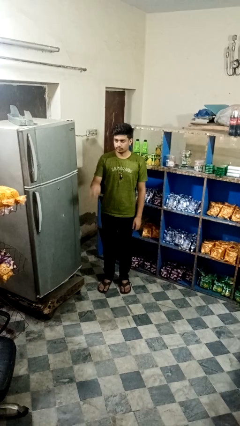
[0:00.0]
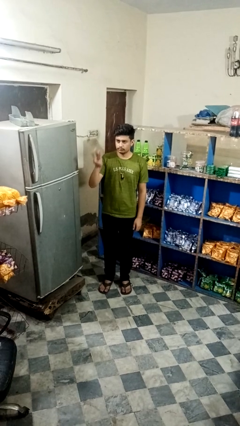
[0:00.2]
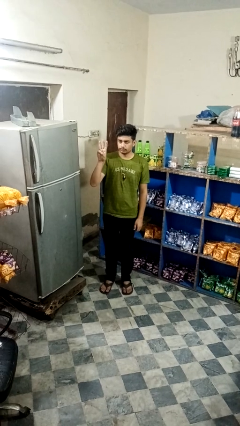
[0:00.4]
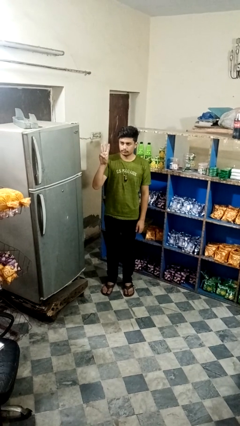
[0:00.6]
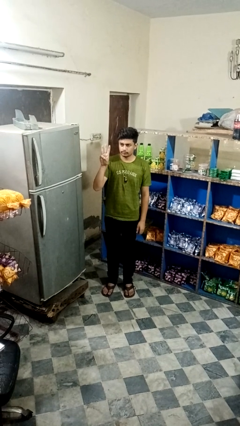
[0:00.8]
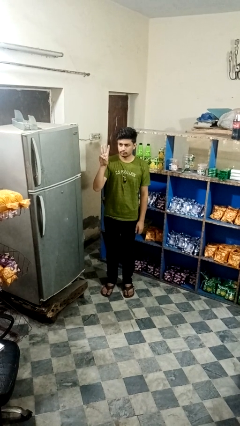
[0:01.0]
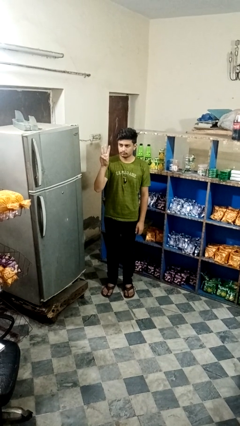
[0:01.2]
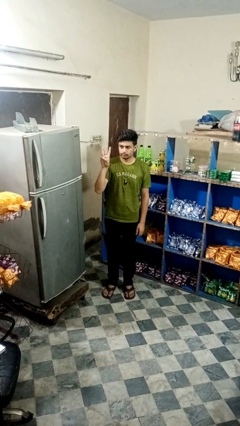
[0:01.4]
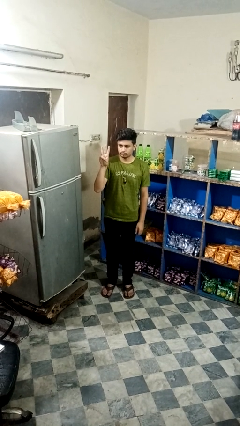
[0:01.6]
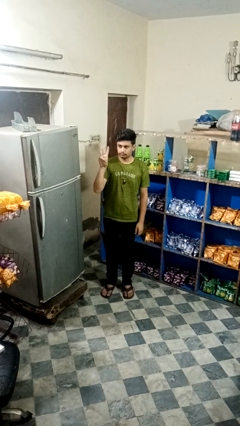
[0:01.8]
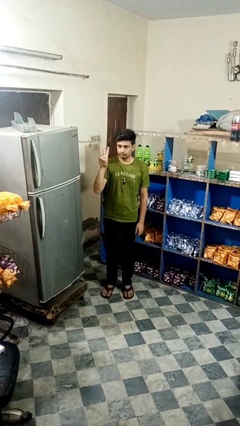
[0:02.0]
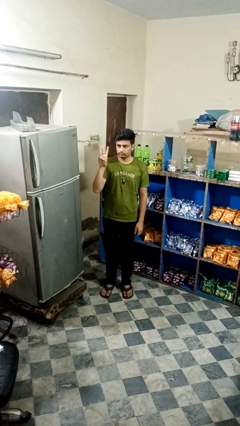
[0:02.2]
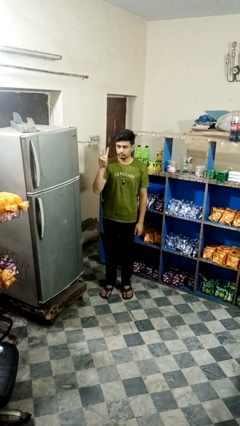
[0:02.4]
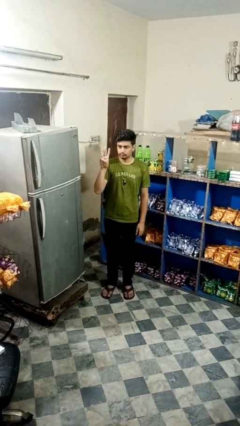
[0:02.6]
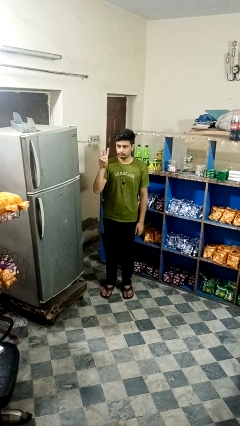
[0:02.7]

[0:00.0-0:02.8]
person gestures number three

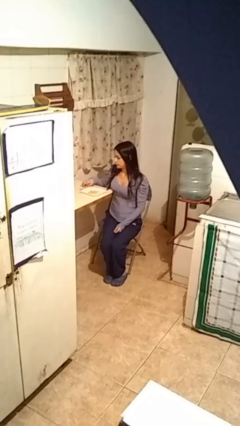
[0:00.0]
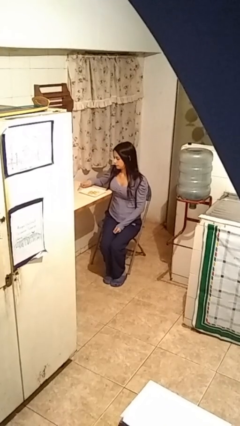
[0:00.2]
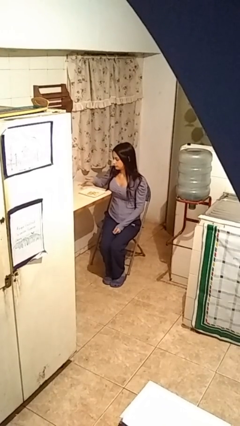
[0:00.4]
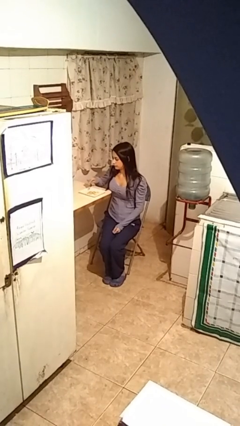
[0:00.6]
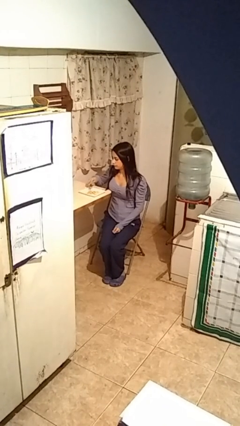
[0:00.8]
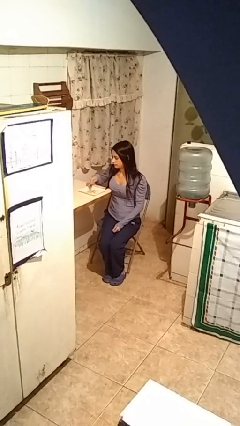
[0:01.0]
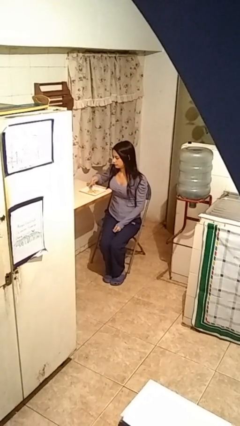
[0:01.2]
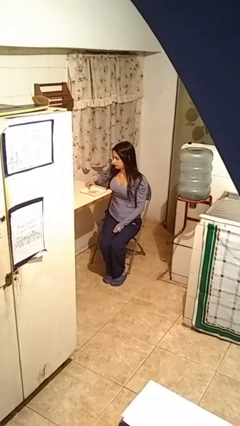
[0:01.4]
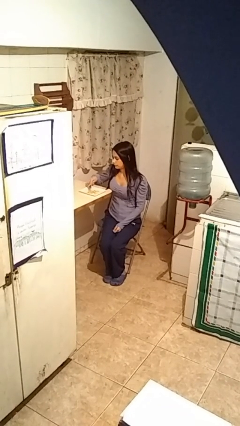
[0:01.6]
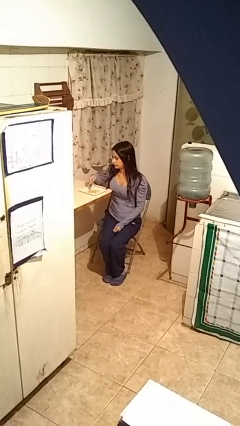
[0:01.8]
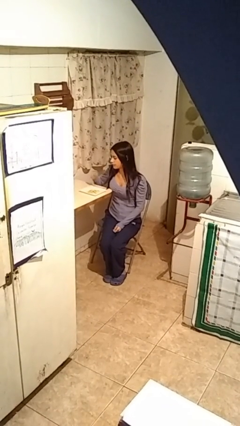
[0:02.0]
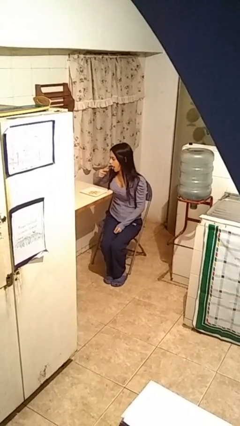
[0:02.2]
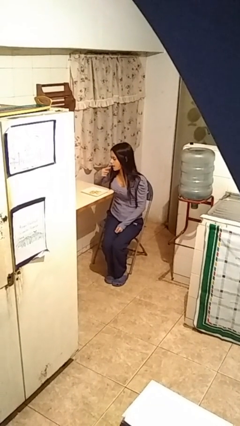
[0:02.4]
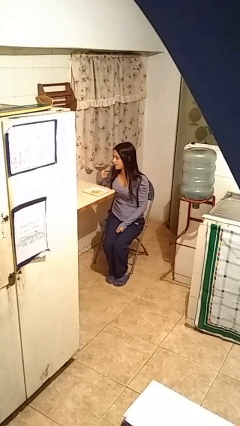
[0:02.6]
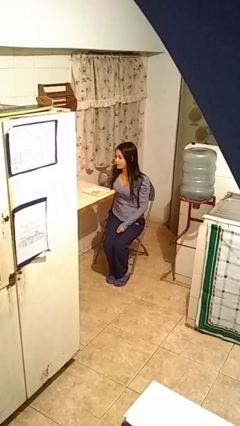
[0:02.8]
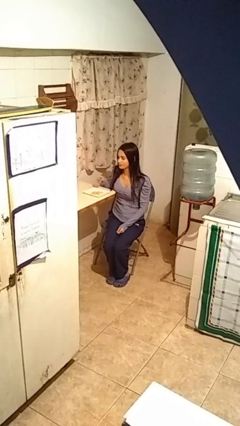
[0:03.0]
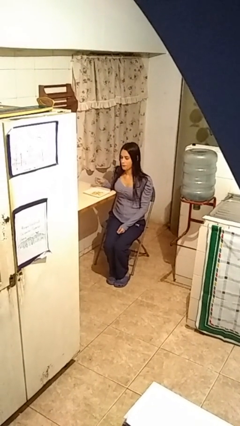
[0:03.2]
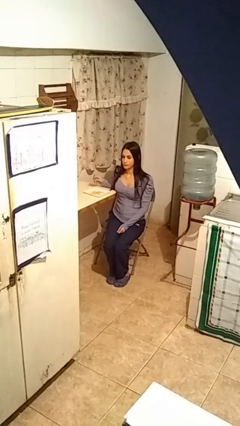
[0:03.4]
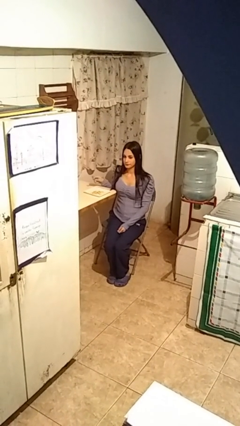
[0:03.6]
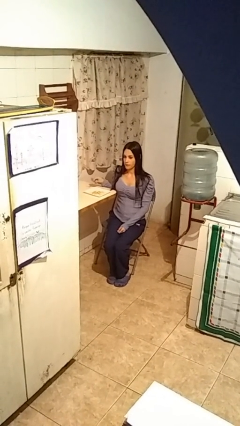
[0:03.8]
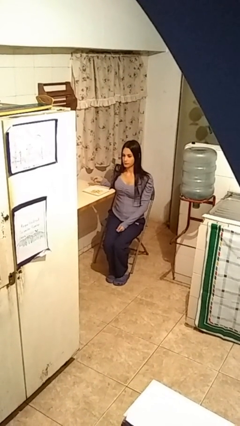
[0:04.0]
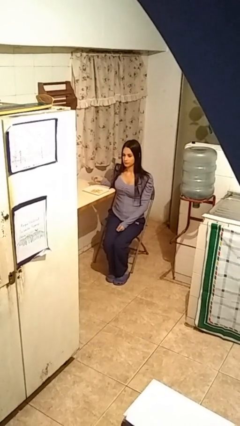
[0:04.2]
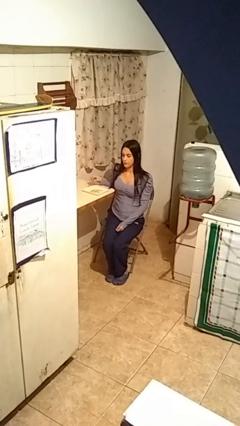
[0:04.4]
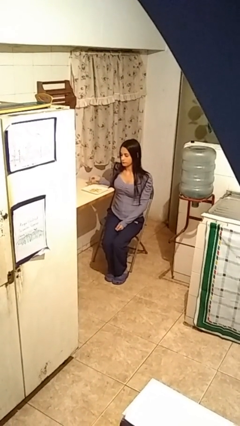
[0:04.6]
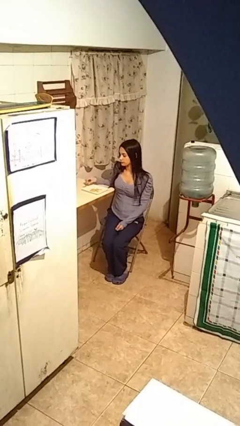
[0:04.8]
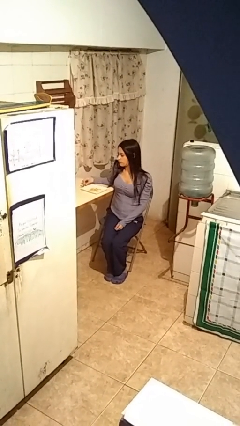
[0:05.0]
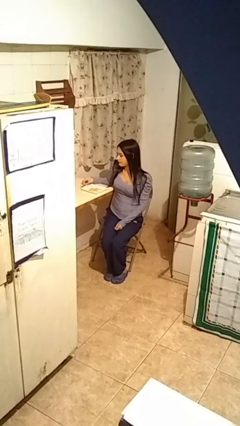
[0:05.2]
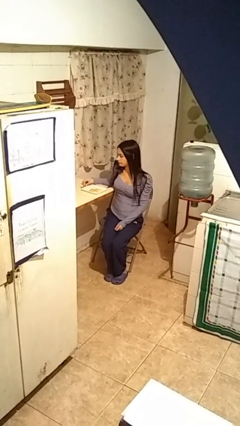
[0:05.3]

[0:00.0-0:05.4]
person eats with utensil

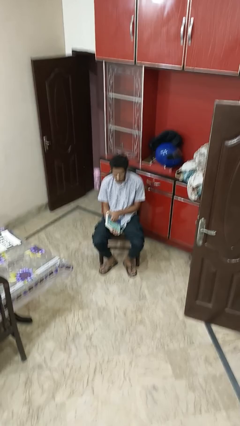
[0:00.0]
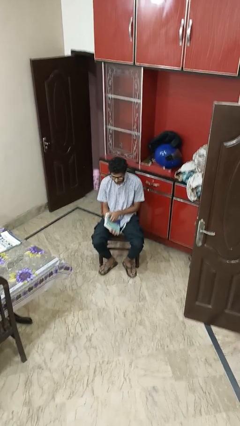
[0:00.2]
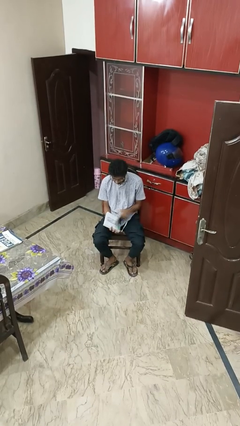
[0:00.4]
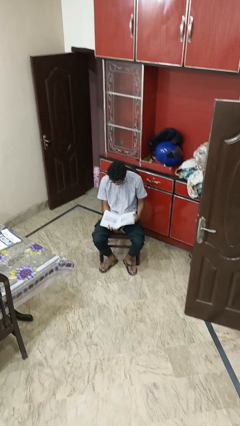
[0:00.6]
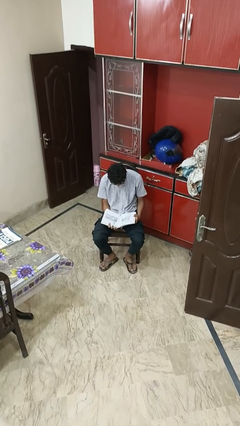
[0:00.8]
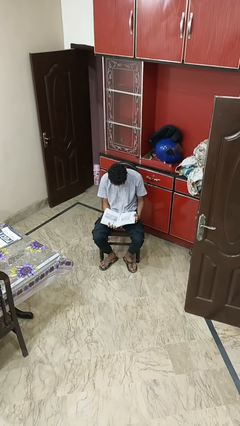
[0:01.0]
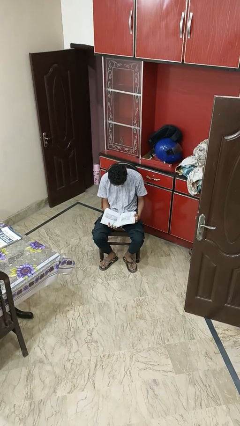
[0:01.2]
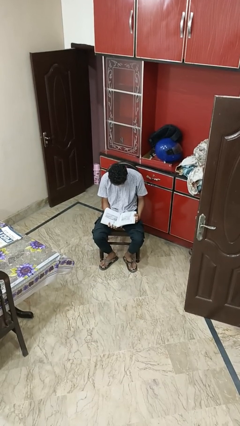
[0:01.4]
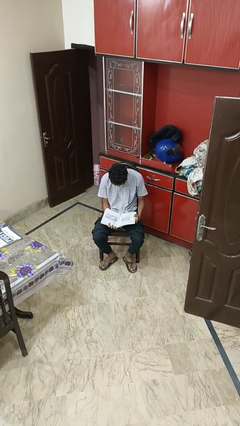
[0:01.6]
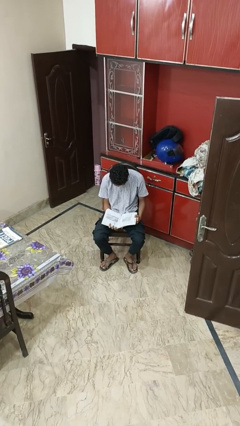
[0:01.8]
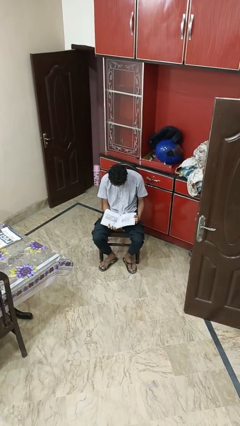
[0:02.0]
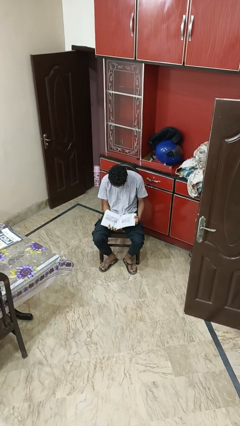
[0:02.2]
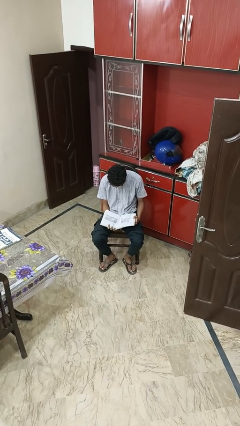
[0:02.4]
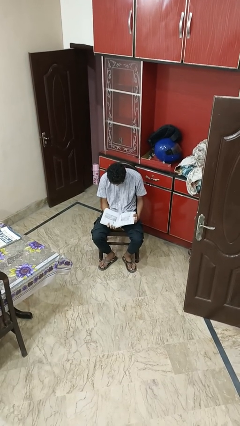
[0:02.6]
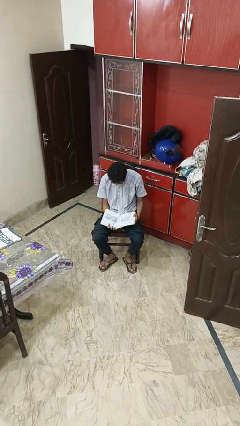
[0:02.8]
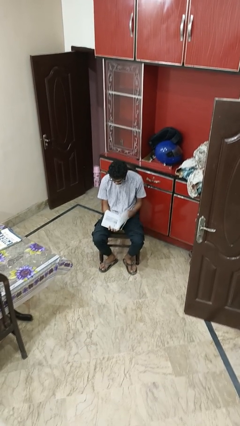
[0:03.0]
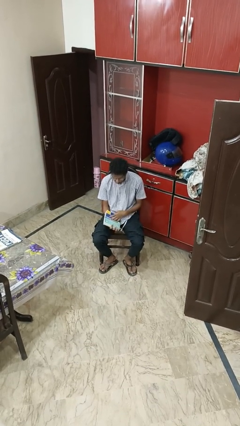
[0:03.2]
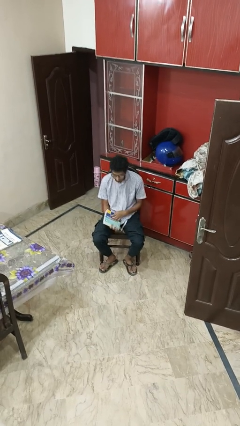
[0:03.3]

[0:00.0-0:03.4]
person reads book

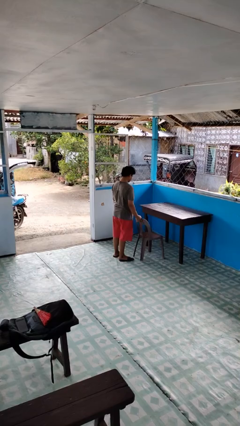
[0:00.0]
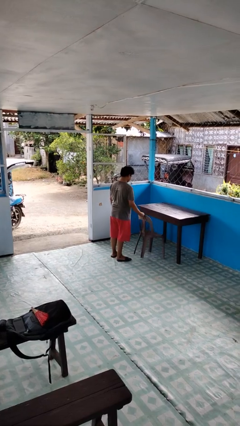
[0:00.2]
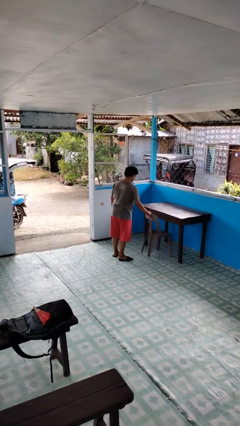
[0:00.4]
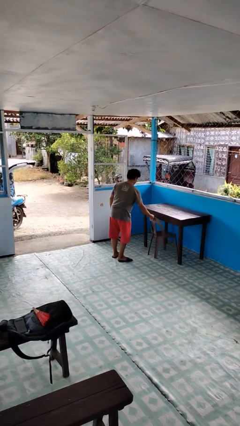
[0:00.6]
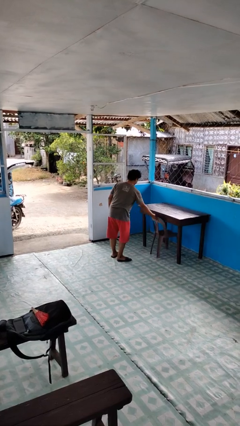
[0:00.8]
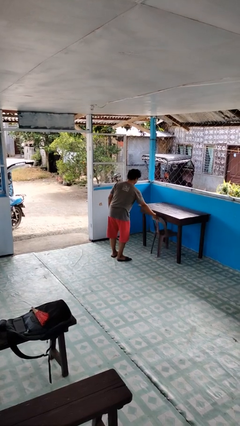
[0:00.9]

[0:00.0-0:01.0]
person pushes in chair

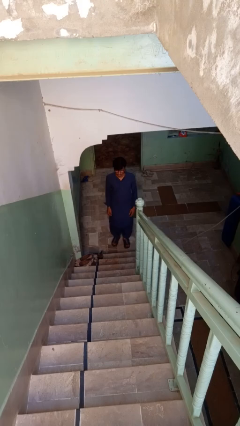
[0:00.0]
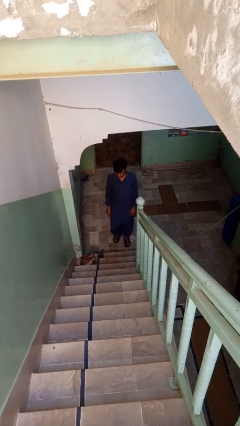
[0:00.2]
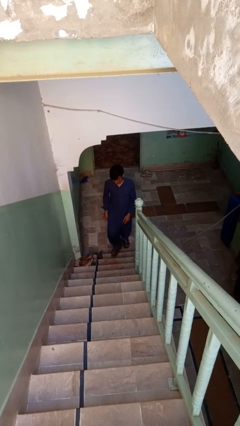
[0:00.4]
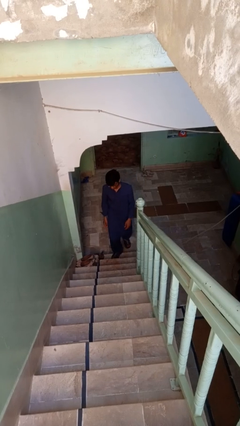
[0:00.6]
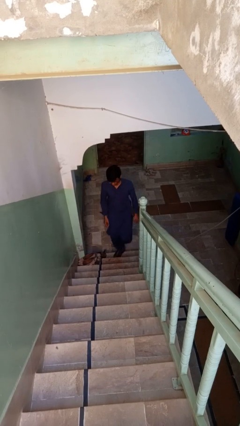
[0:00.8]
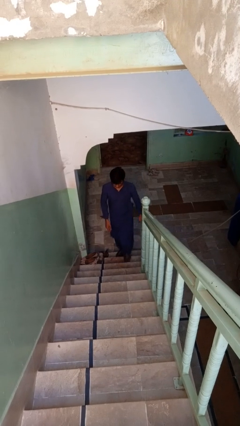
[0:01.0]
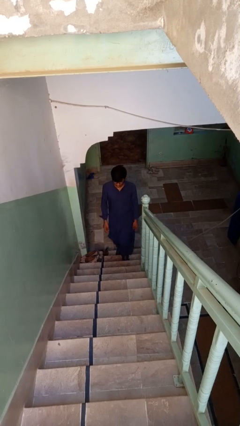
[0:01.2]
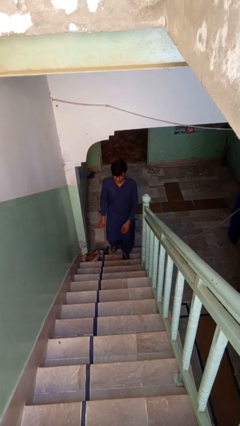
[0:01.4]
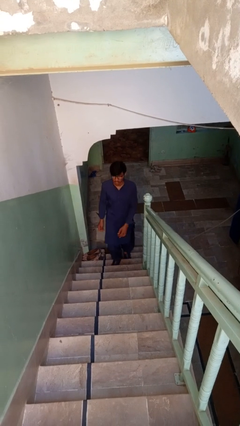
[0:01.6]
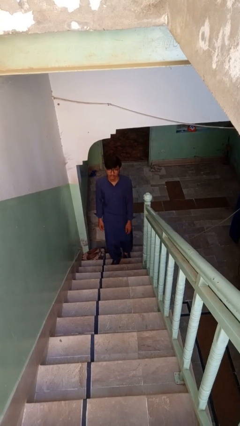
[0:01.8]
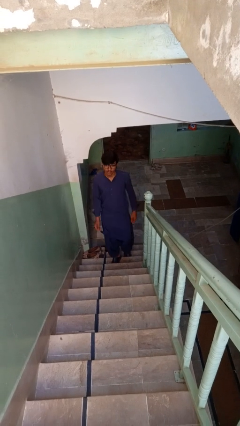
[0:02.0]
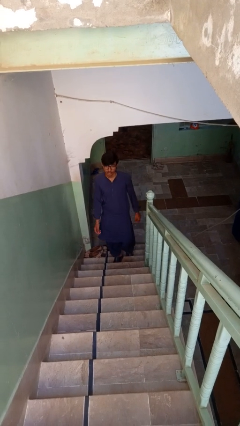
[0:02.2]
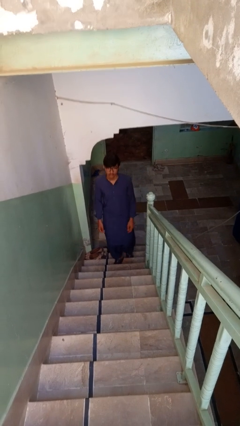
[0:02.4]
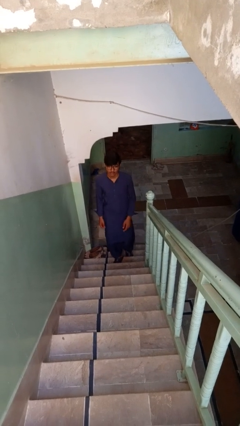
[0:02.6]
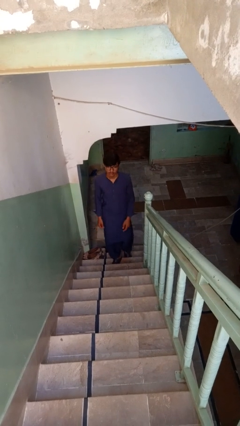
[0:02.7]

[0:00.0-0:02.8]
person climbs up stairs

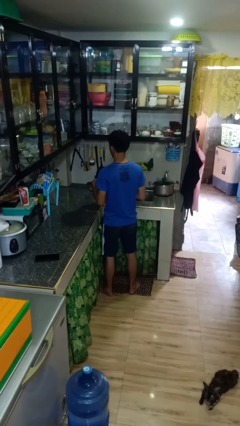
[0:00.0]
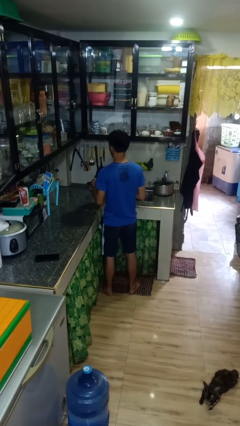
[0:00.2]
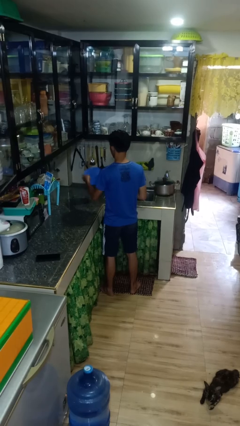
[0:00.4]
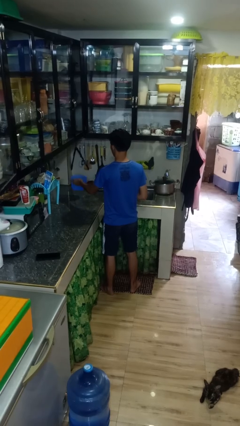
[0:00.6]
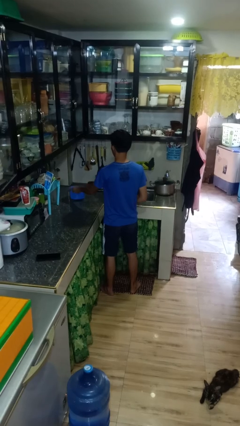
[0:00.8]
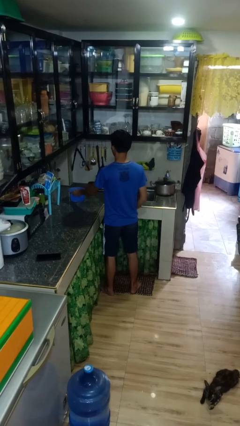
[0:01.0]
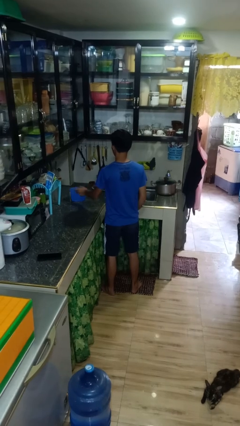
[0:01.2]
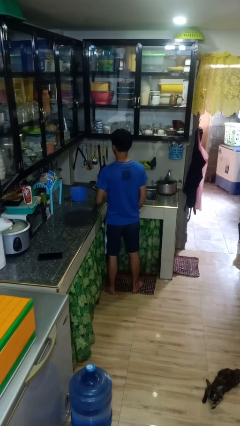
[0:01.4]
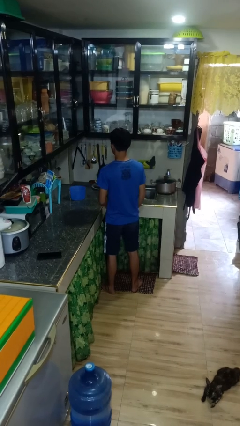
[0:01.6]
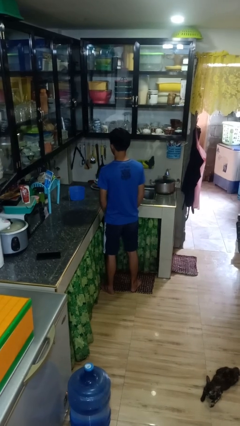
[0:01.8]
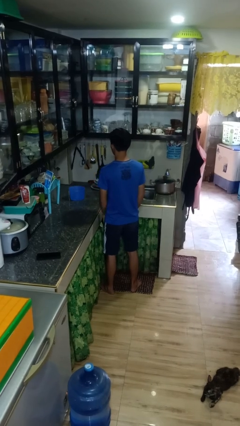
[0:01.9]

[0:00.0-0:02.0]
person puts down object on countertop
